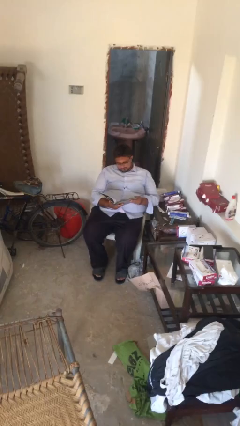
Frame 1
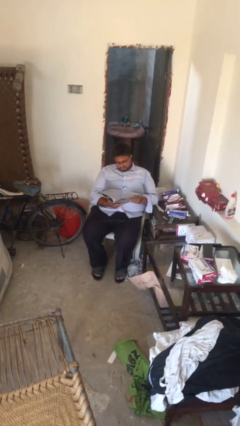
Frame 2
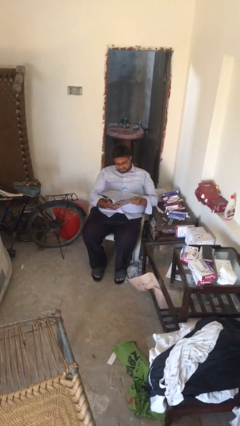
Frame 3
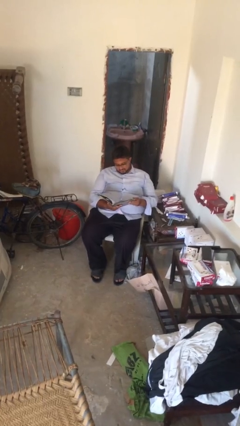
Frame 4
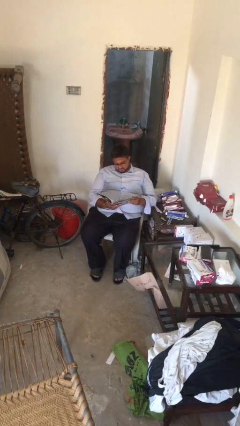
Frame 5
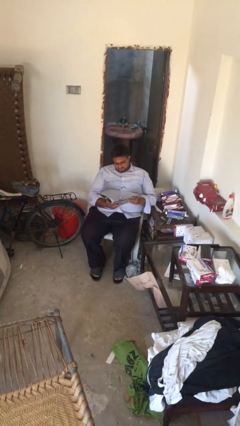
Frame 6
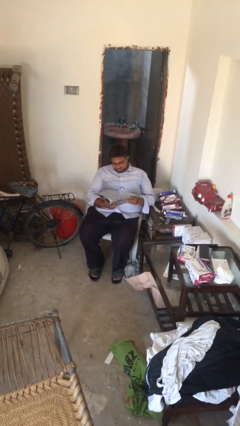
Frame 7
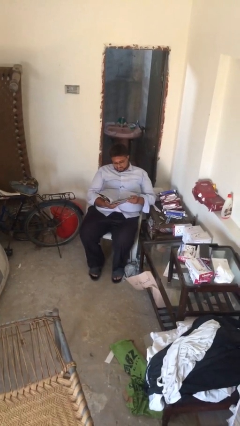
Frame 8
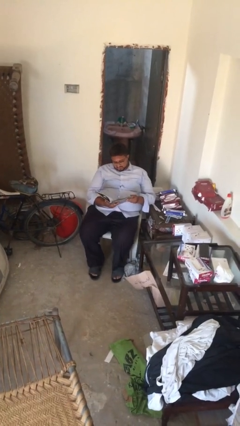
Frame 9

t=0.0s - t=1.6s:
person reads document

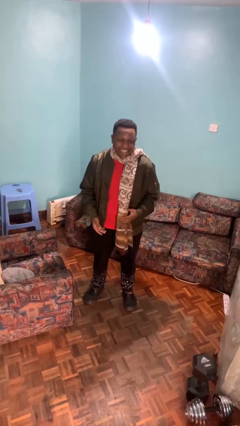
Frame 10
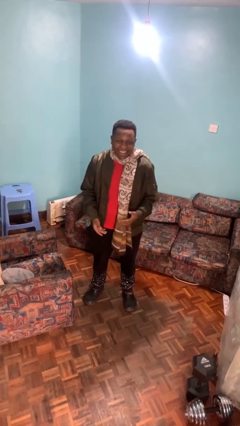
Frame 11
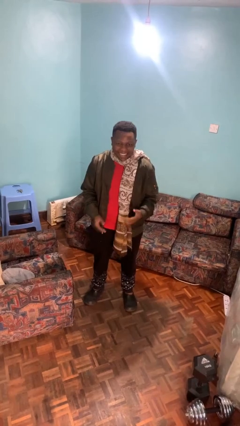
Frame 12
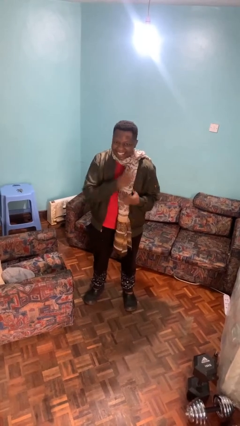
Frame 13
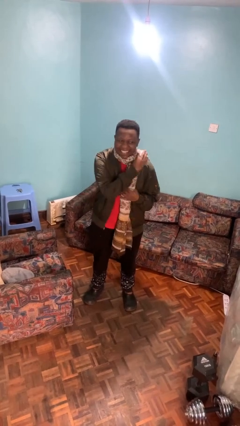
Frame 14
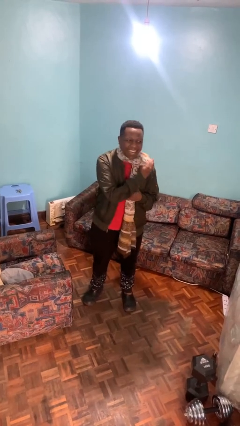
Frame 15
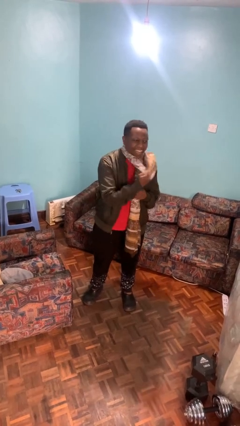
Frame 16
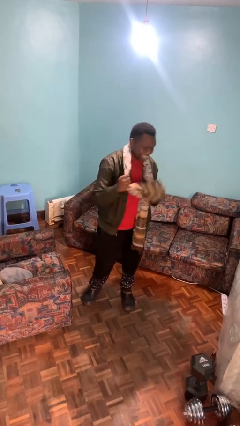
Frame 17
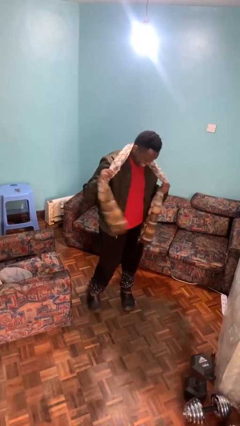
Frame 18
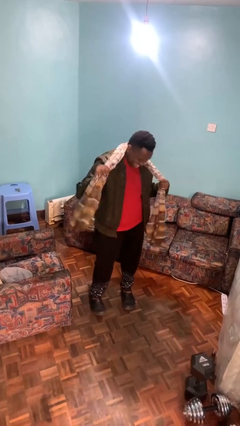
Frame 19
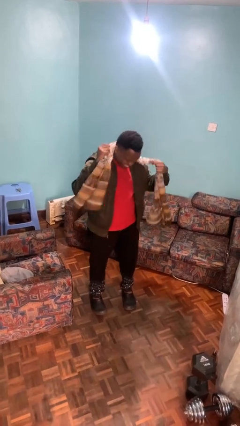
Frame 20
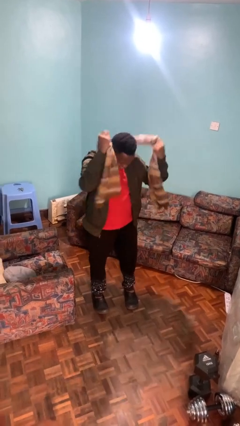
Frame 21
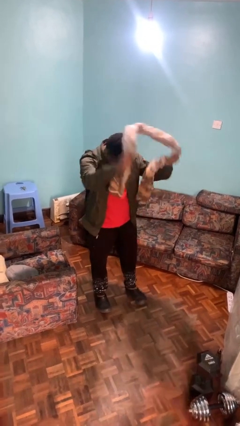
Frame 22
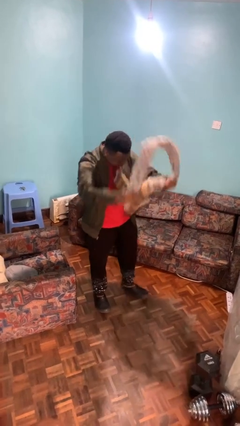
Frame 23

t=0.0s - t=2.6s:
person takes off scarf

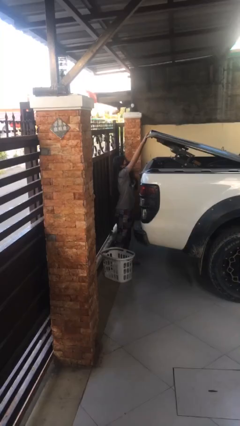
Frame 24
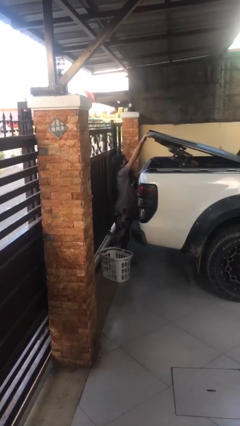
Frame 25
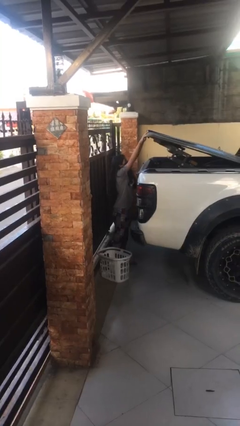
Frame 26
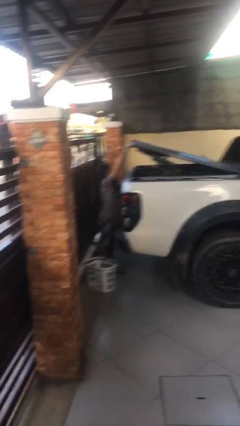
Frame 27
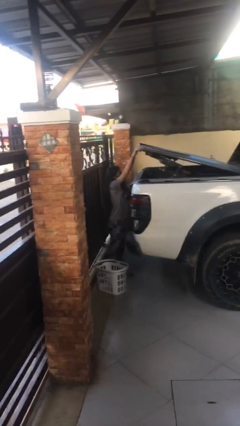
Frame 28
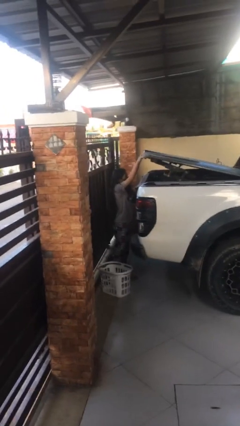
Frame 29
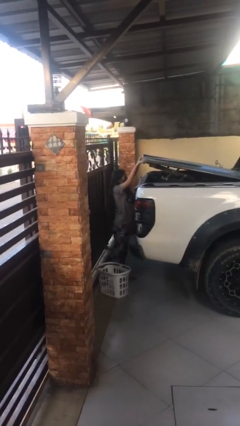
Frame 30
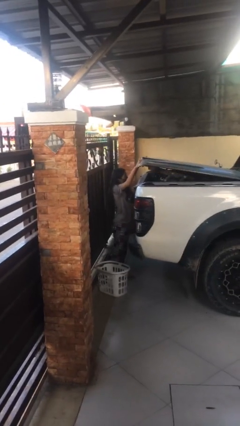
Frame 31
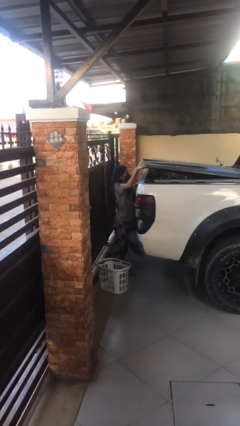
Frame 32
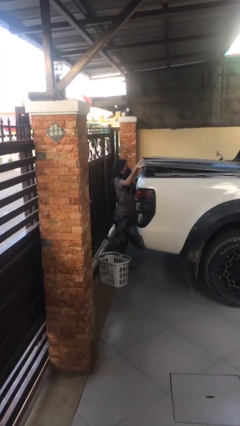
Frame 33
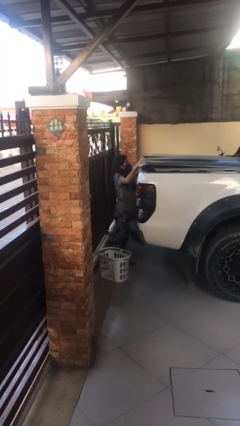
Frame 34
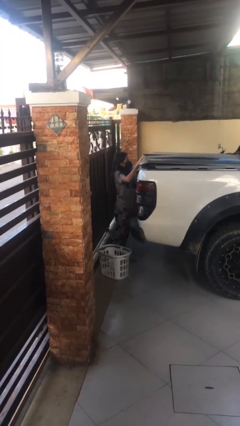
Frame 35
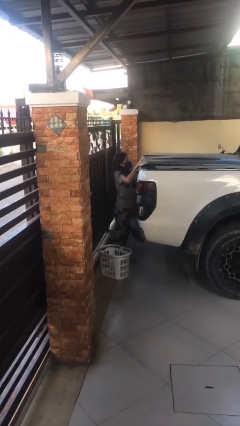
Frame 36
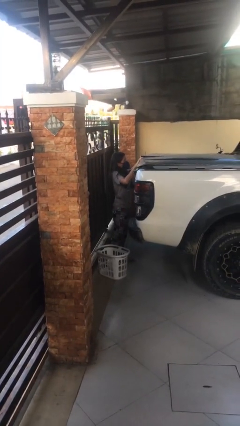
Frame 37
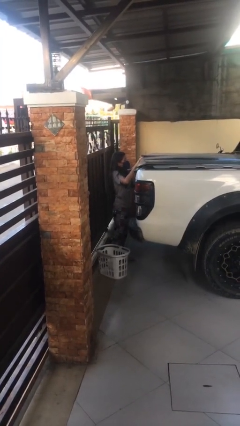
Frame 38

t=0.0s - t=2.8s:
person closes car trunk

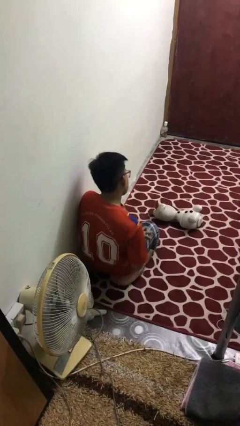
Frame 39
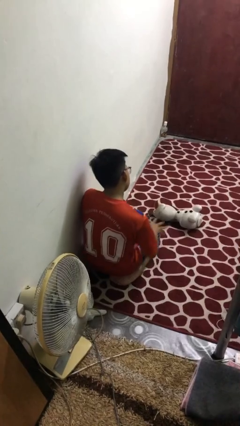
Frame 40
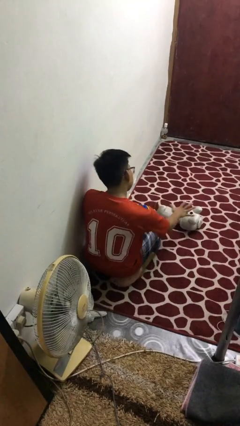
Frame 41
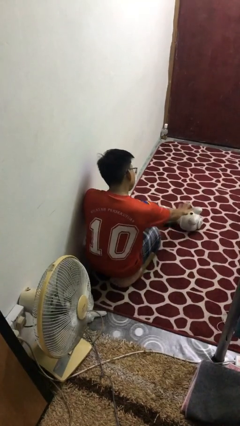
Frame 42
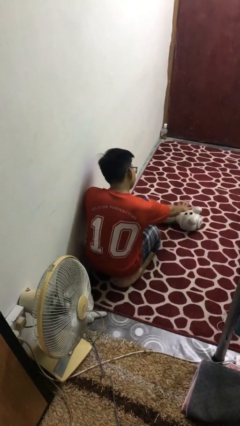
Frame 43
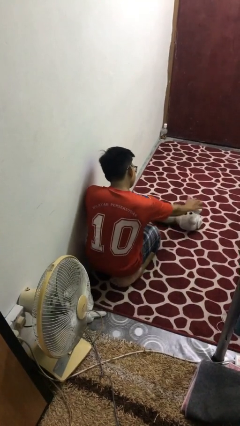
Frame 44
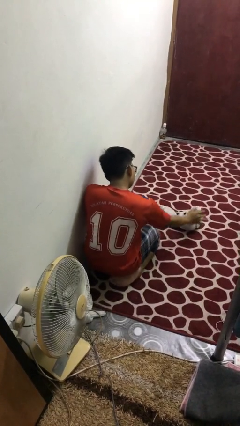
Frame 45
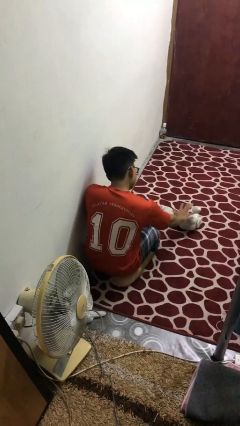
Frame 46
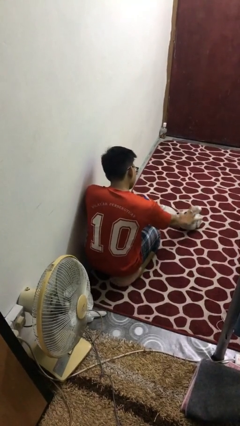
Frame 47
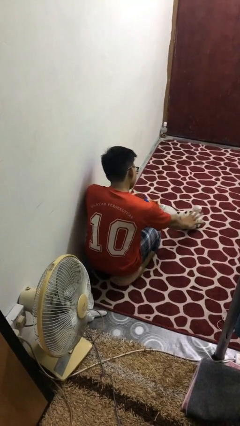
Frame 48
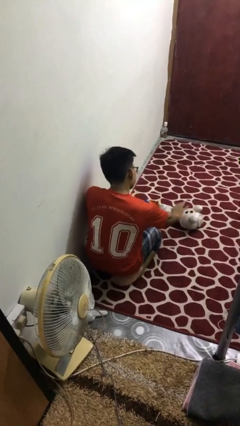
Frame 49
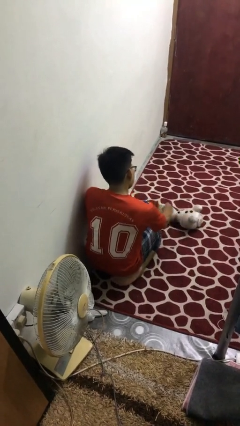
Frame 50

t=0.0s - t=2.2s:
person waves hand over object

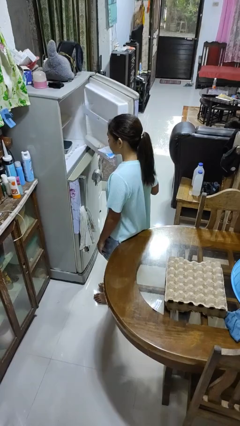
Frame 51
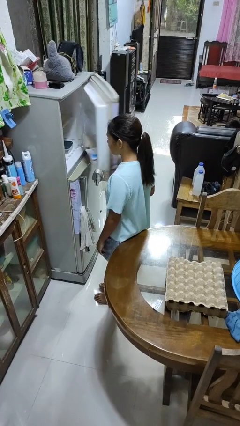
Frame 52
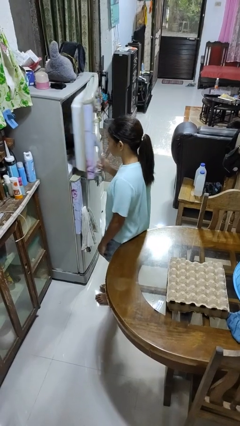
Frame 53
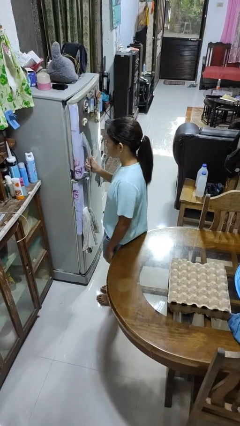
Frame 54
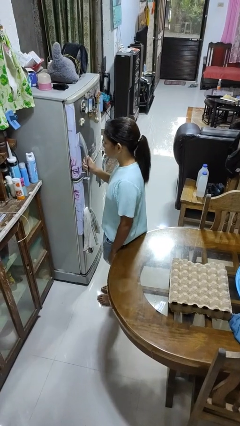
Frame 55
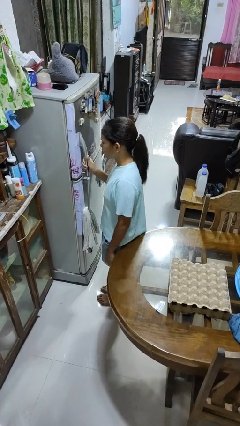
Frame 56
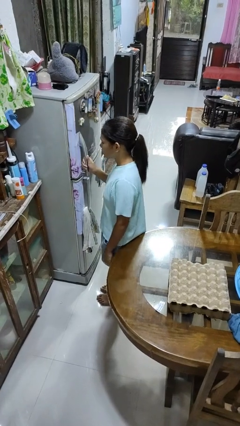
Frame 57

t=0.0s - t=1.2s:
person closes refrigerator

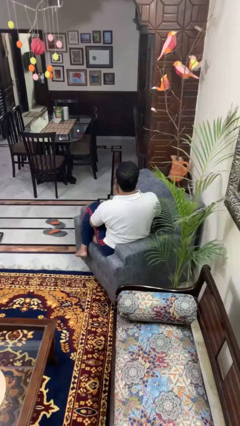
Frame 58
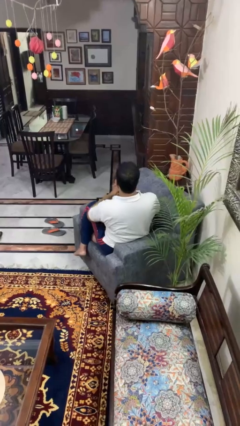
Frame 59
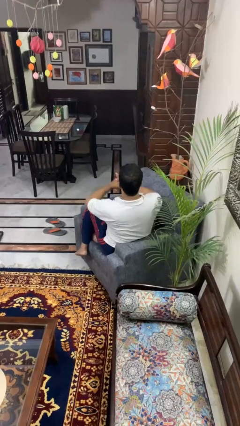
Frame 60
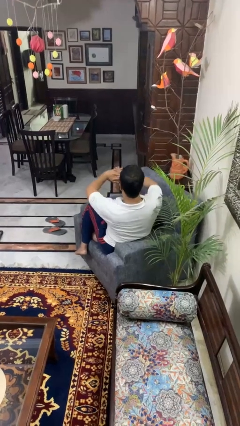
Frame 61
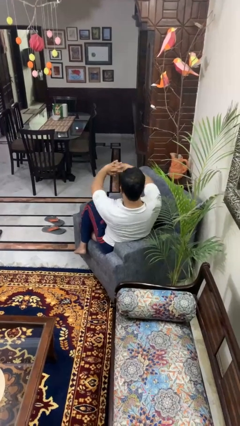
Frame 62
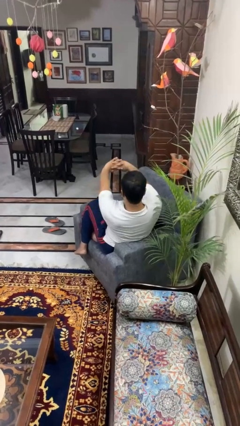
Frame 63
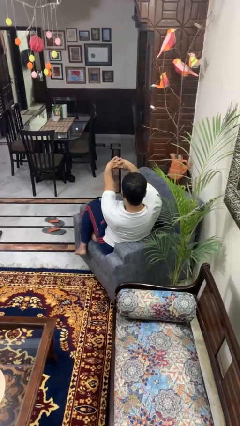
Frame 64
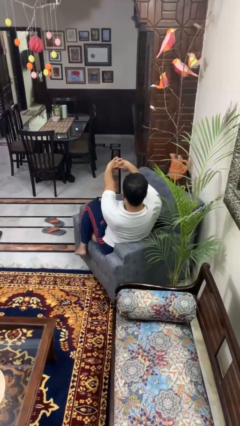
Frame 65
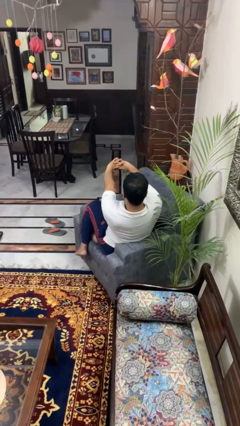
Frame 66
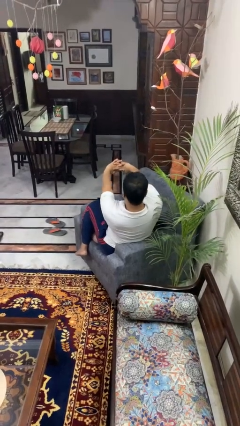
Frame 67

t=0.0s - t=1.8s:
person cracks knuckles

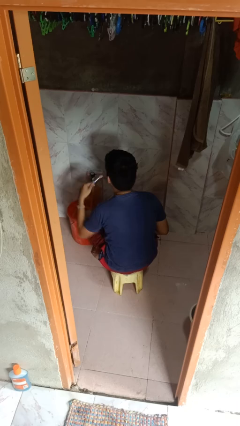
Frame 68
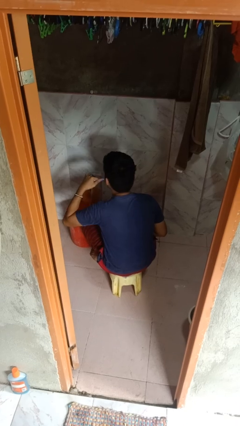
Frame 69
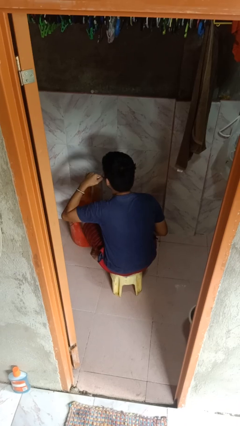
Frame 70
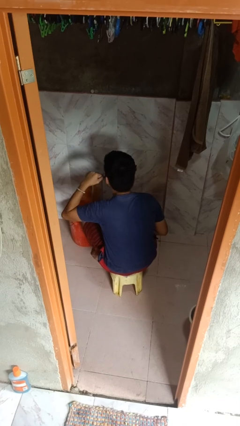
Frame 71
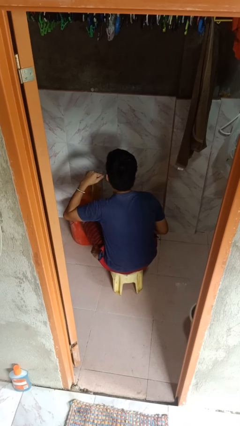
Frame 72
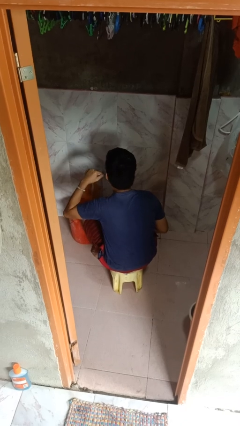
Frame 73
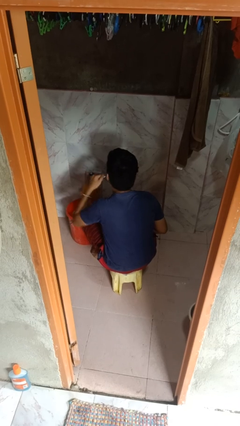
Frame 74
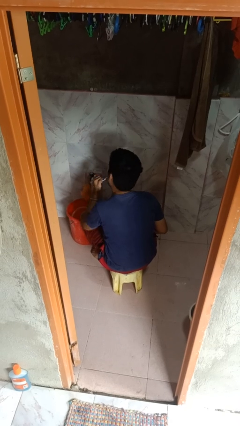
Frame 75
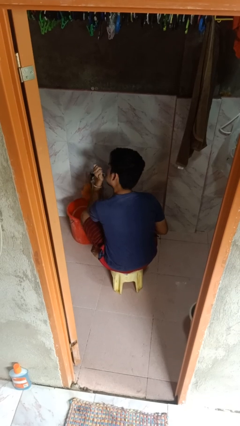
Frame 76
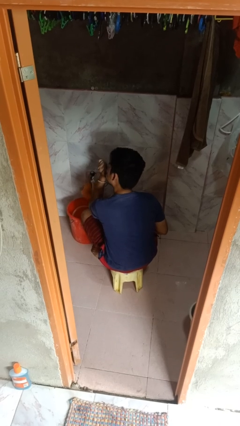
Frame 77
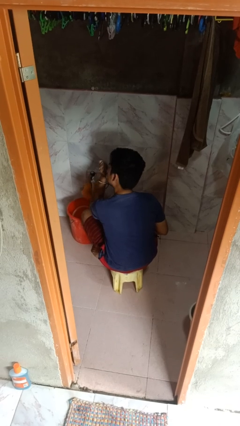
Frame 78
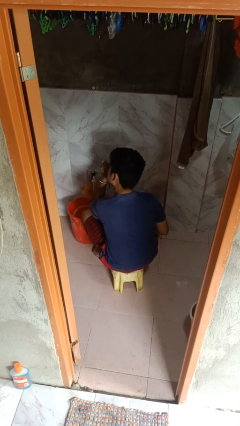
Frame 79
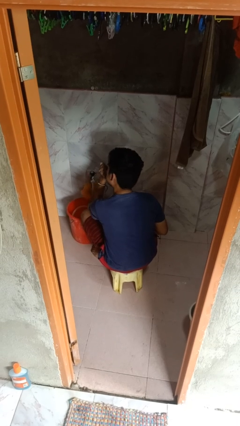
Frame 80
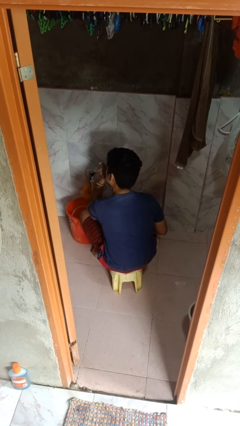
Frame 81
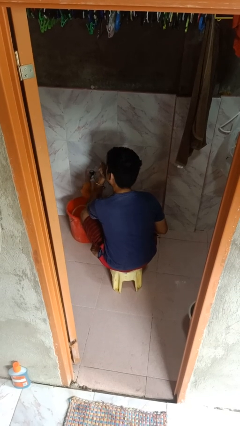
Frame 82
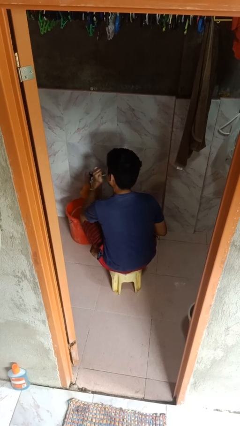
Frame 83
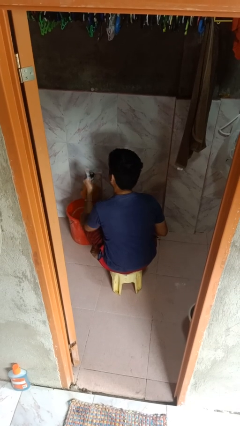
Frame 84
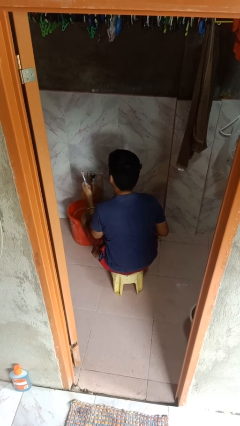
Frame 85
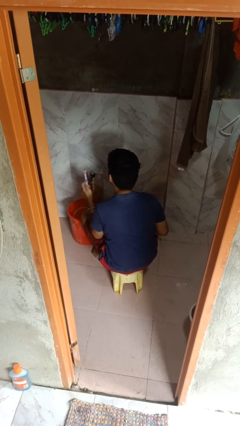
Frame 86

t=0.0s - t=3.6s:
person brushes teeth

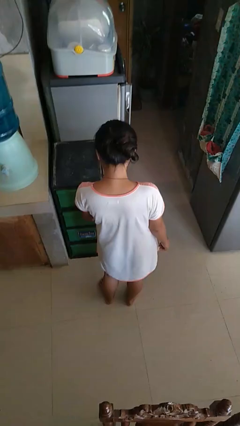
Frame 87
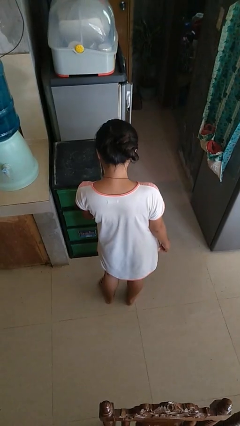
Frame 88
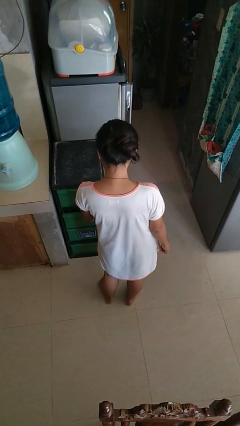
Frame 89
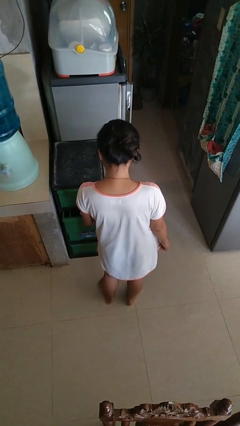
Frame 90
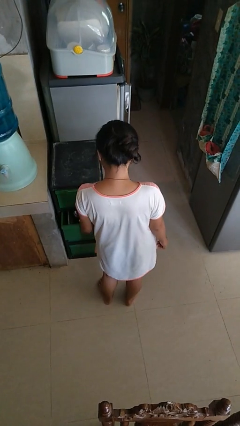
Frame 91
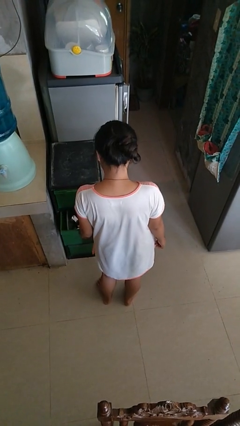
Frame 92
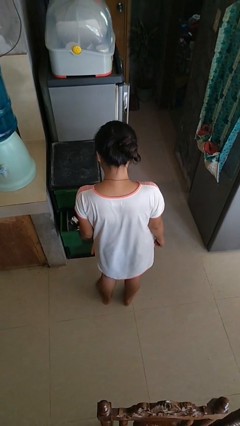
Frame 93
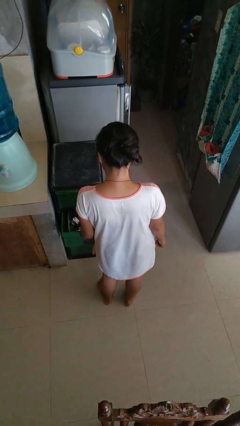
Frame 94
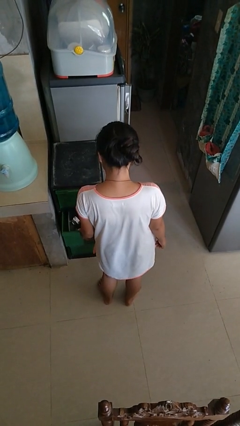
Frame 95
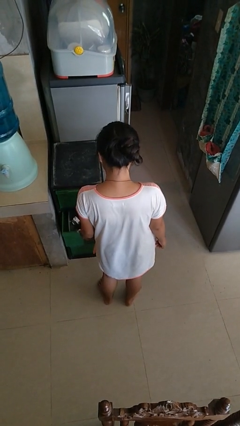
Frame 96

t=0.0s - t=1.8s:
person opens kitchen drawer
